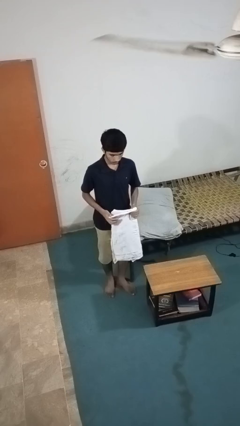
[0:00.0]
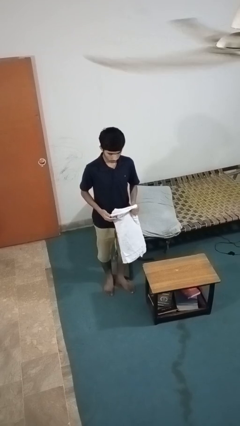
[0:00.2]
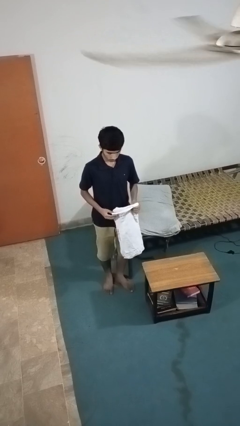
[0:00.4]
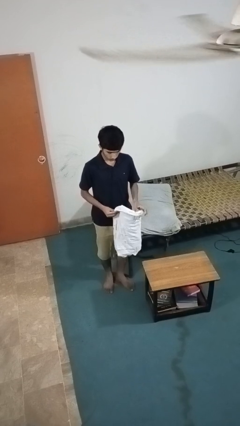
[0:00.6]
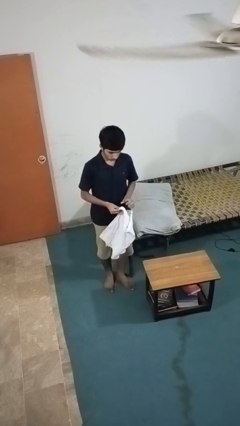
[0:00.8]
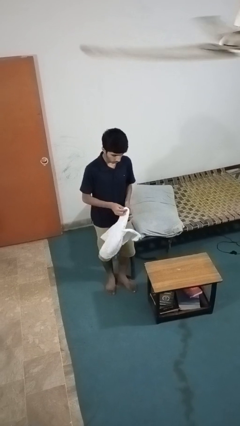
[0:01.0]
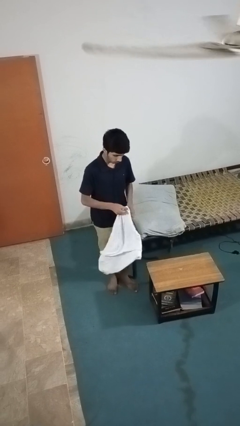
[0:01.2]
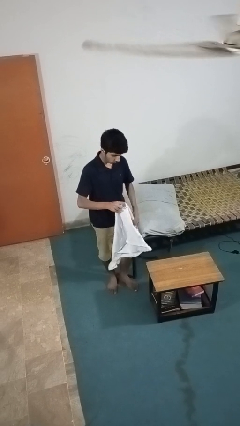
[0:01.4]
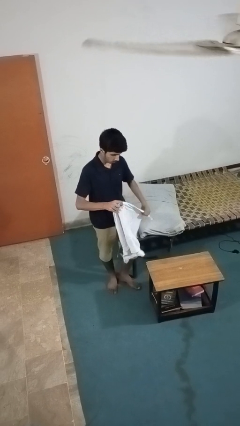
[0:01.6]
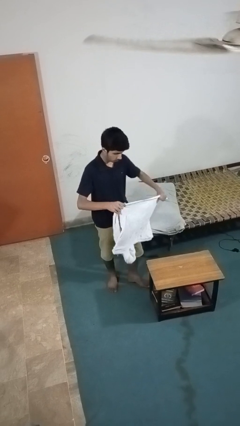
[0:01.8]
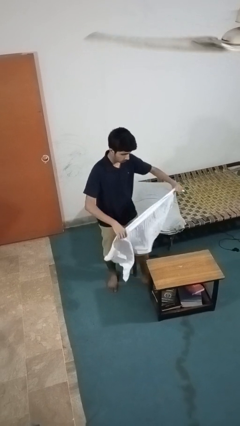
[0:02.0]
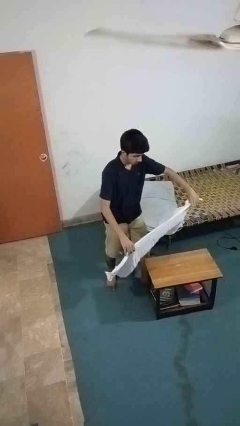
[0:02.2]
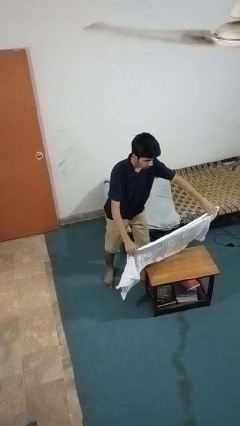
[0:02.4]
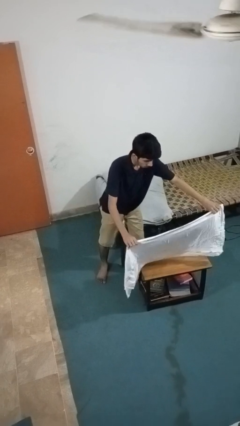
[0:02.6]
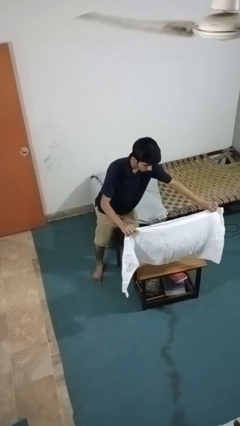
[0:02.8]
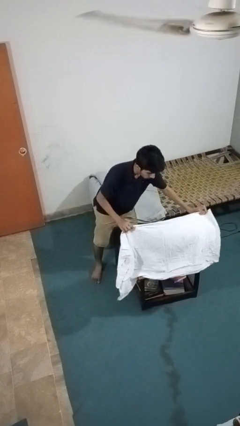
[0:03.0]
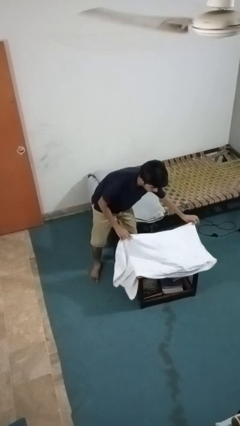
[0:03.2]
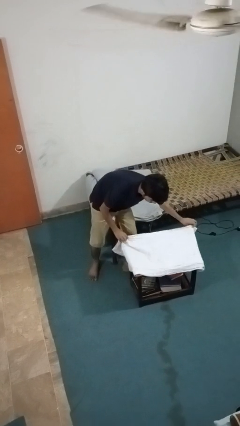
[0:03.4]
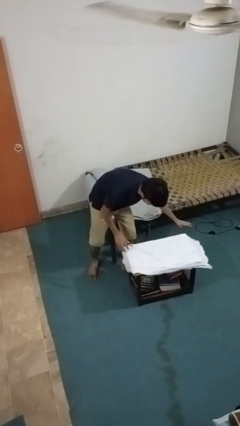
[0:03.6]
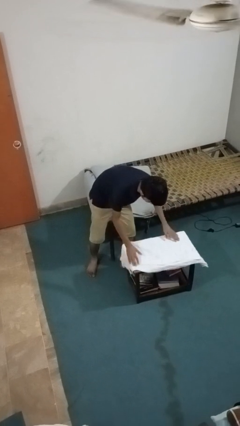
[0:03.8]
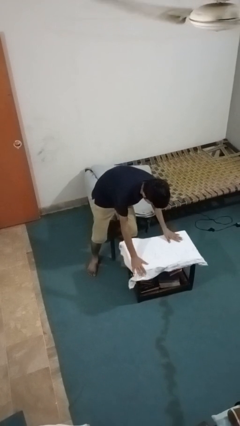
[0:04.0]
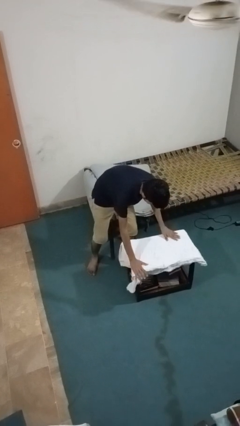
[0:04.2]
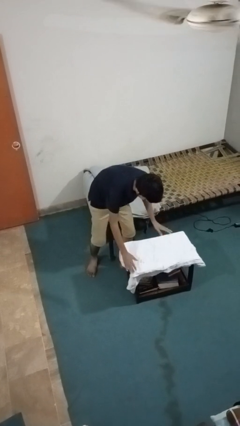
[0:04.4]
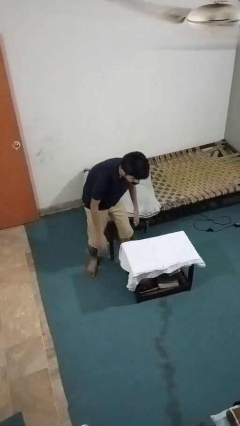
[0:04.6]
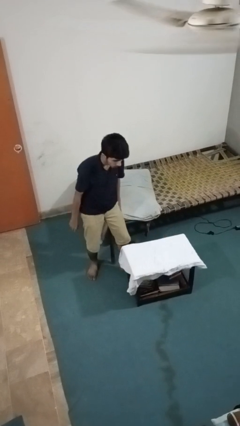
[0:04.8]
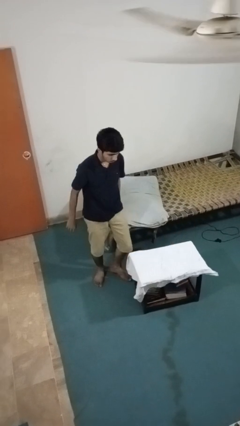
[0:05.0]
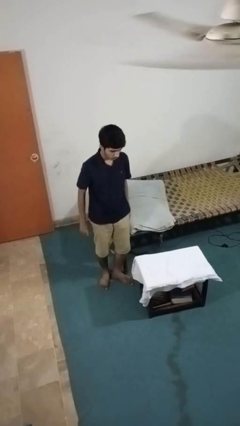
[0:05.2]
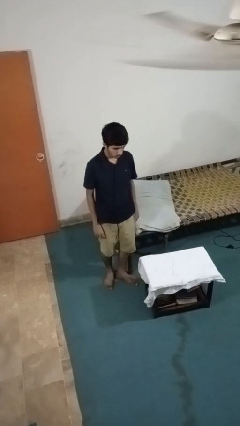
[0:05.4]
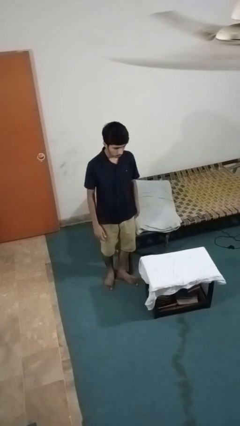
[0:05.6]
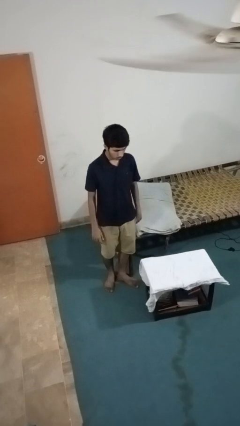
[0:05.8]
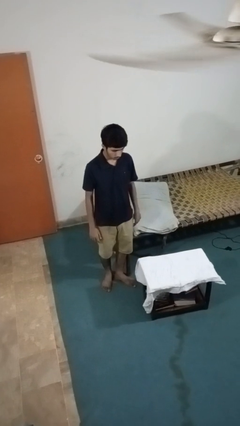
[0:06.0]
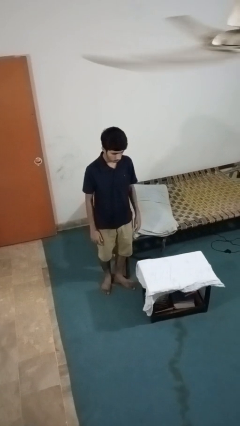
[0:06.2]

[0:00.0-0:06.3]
person spreads tablecloth

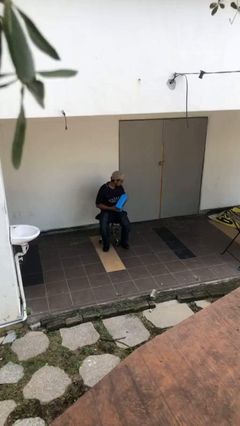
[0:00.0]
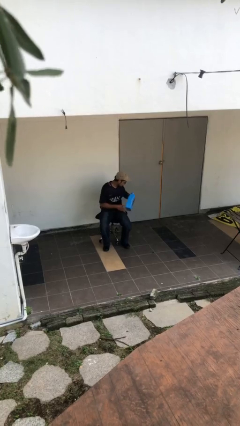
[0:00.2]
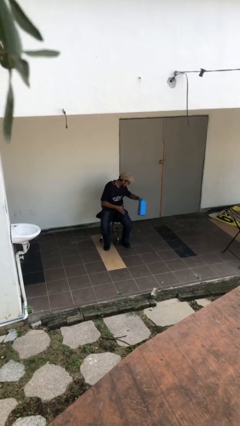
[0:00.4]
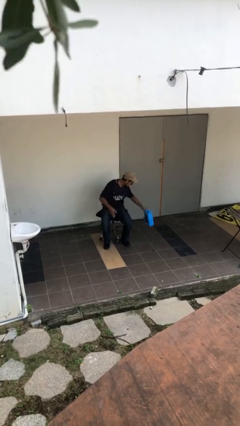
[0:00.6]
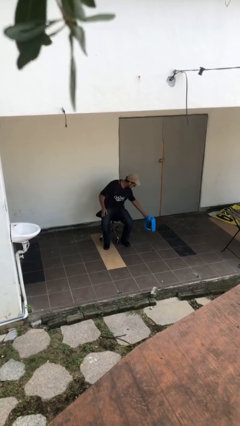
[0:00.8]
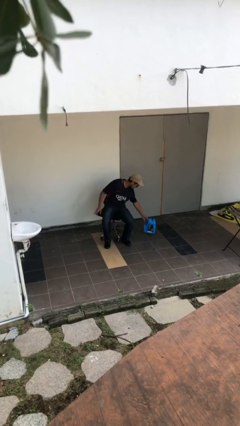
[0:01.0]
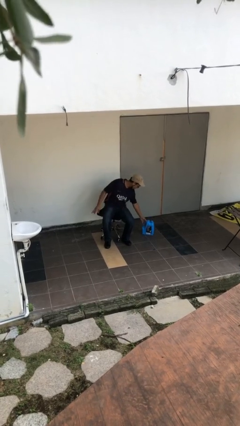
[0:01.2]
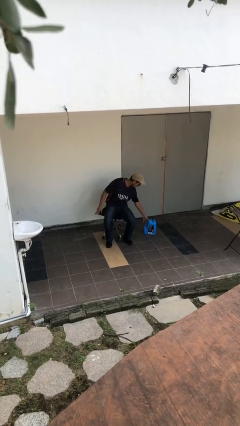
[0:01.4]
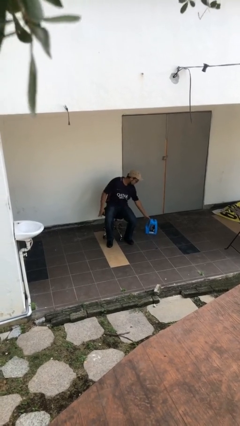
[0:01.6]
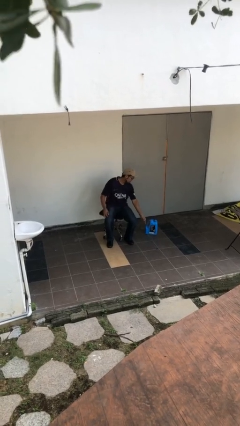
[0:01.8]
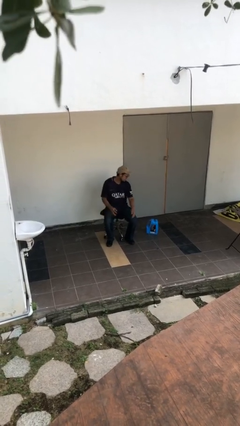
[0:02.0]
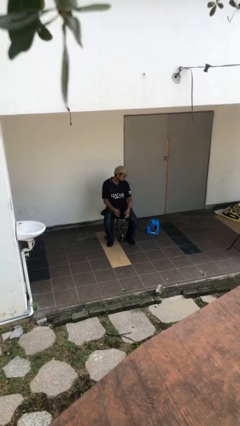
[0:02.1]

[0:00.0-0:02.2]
person puts down object on floor

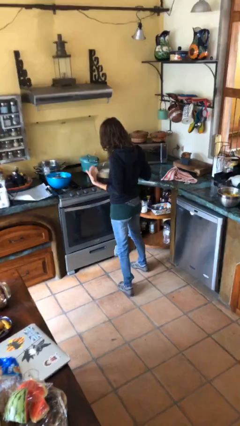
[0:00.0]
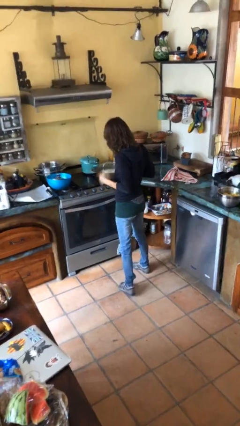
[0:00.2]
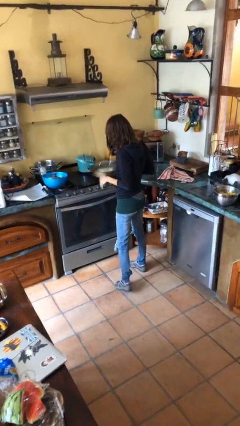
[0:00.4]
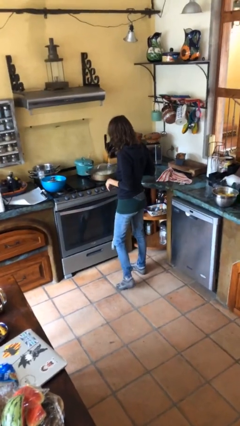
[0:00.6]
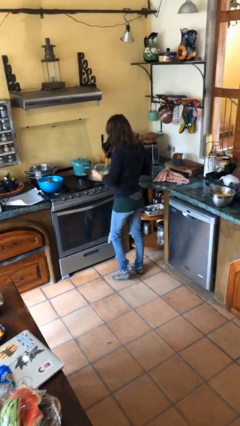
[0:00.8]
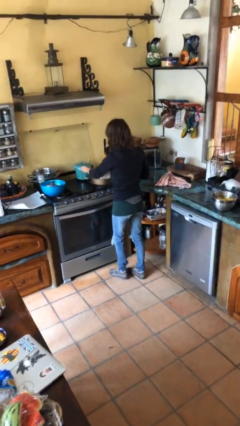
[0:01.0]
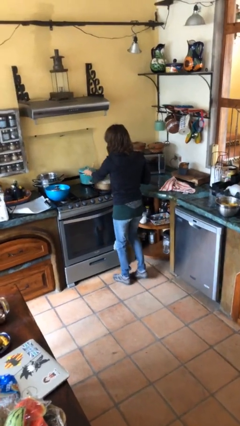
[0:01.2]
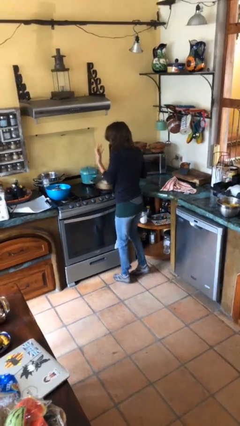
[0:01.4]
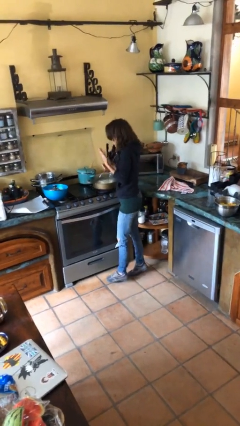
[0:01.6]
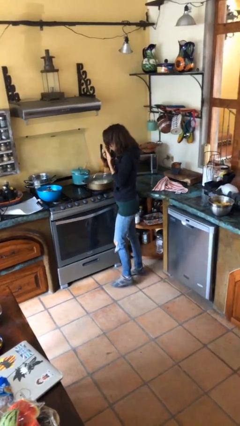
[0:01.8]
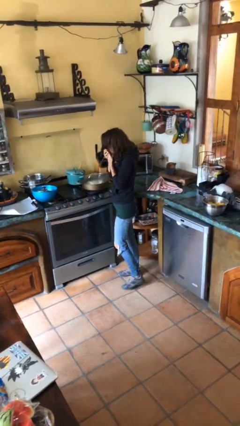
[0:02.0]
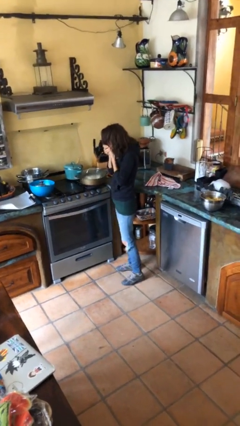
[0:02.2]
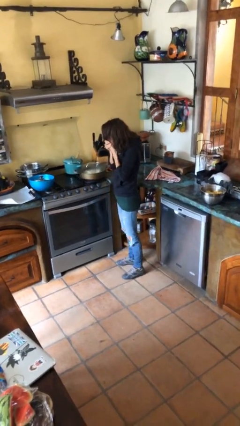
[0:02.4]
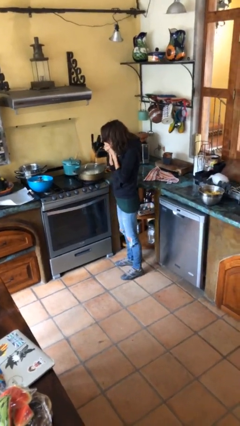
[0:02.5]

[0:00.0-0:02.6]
person burns hand

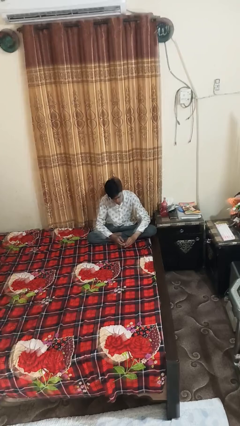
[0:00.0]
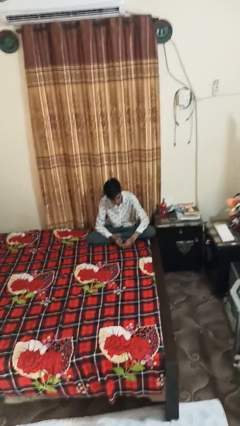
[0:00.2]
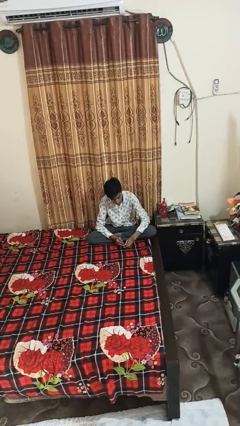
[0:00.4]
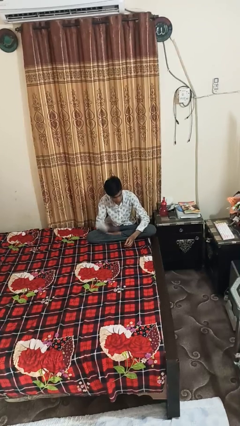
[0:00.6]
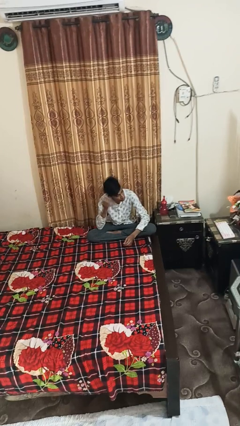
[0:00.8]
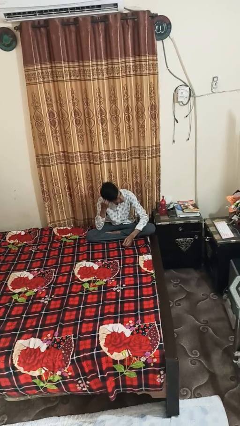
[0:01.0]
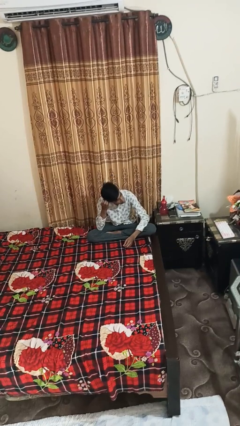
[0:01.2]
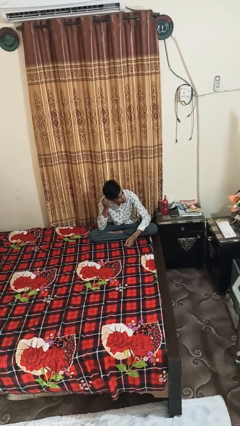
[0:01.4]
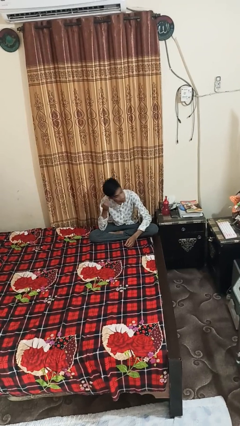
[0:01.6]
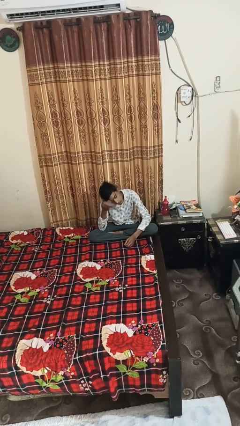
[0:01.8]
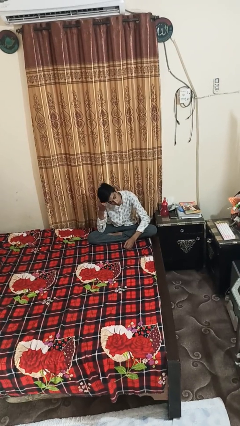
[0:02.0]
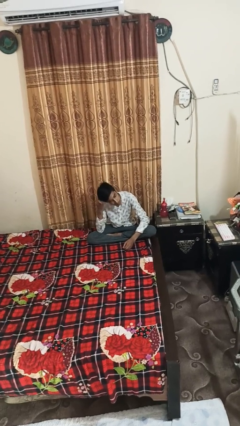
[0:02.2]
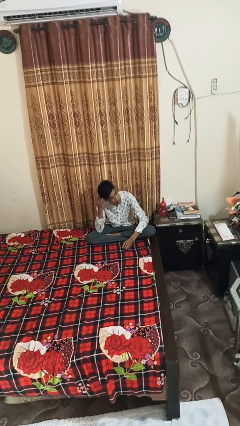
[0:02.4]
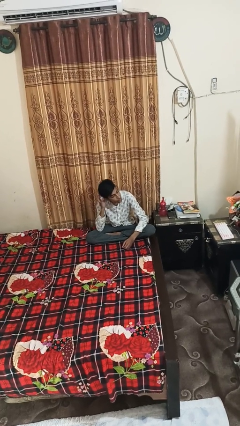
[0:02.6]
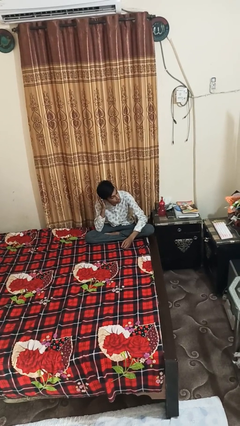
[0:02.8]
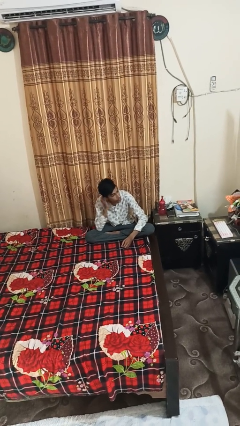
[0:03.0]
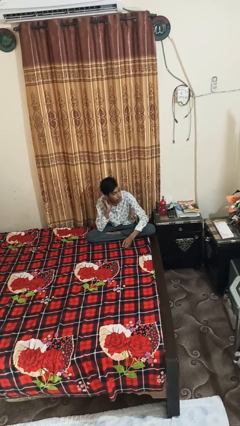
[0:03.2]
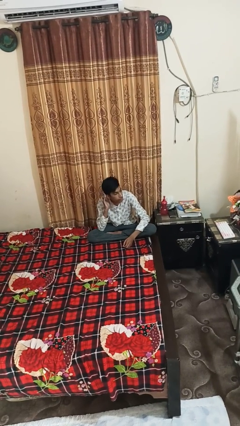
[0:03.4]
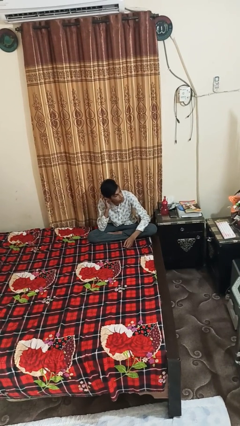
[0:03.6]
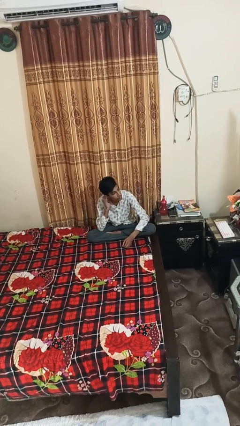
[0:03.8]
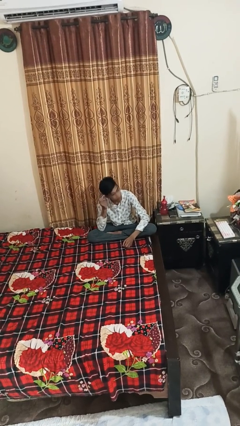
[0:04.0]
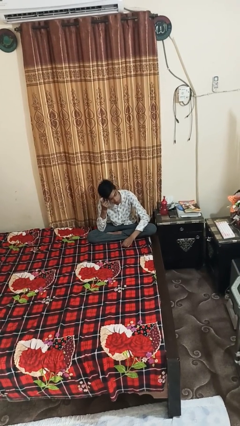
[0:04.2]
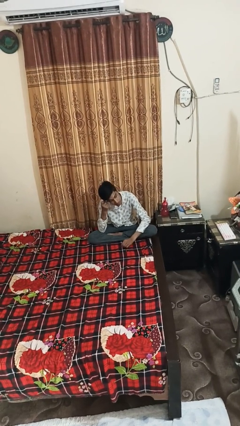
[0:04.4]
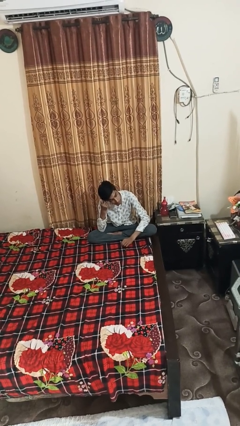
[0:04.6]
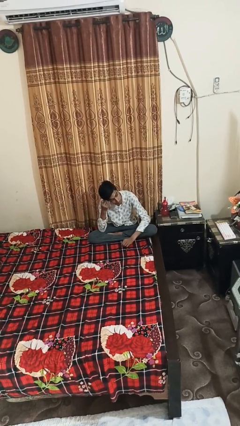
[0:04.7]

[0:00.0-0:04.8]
person strokes hair

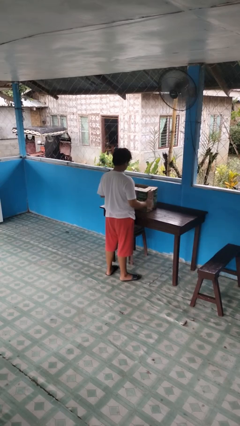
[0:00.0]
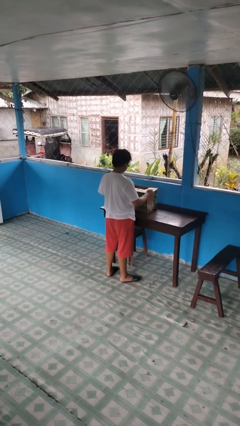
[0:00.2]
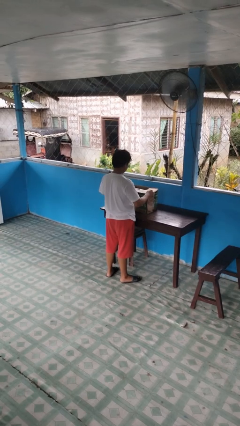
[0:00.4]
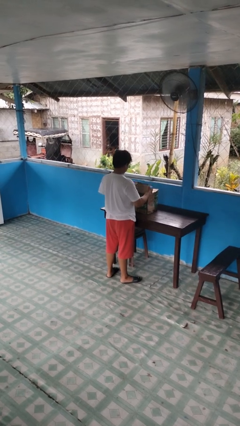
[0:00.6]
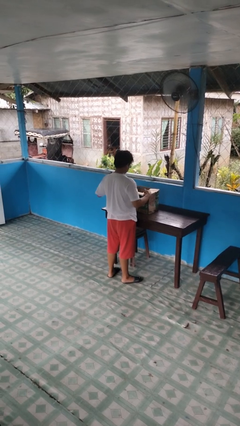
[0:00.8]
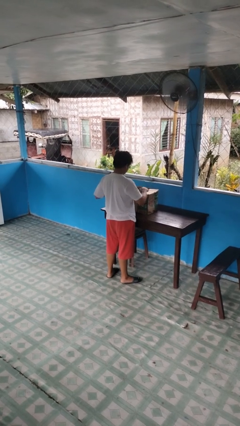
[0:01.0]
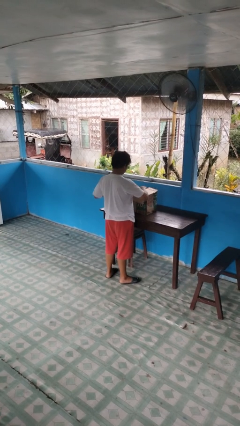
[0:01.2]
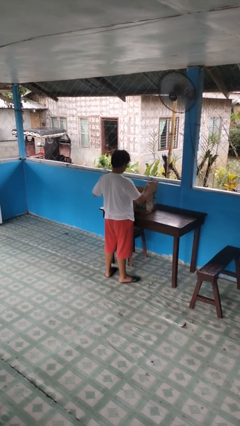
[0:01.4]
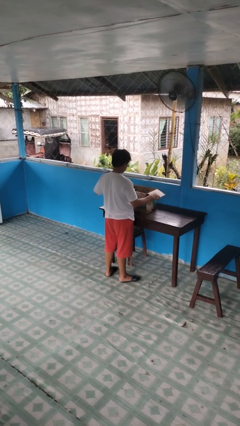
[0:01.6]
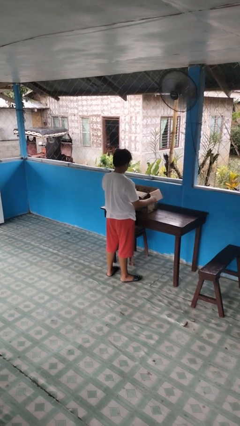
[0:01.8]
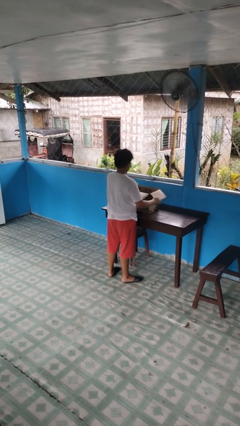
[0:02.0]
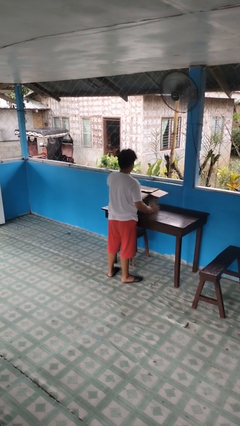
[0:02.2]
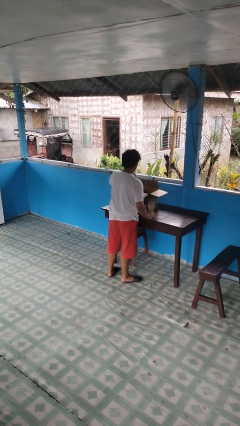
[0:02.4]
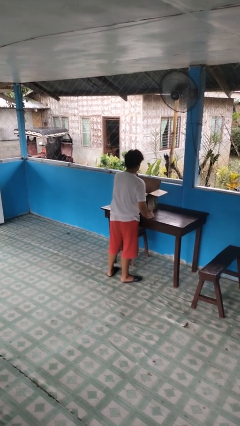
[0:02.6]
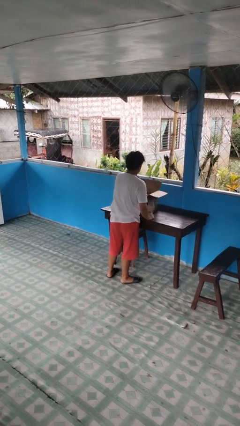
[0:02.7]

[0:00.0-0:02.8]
person opens box
